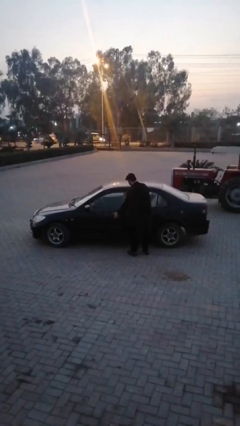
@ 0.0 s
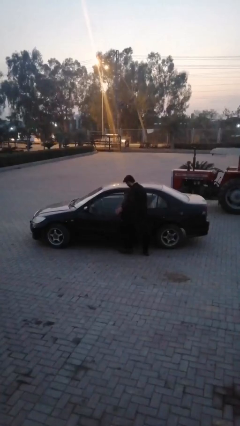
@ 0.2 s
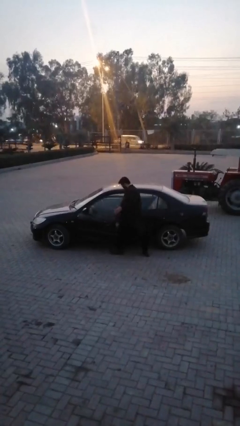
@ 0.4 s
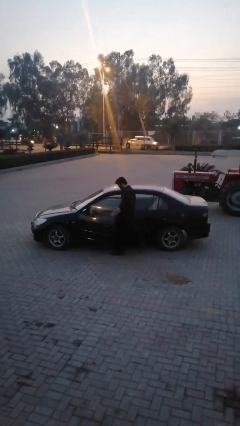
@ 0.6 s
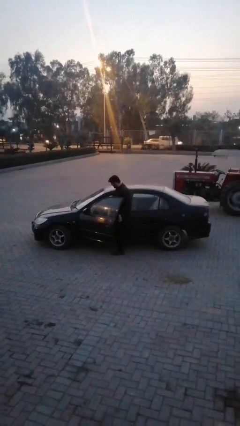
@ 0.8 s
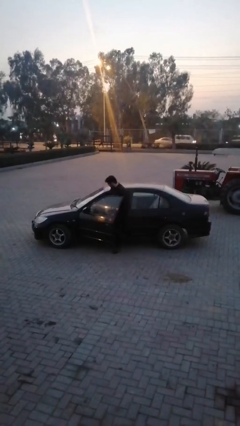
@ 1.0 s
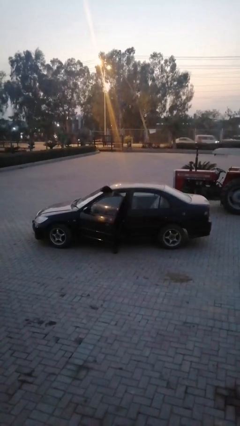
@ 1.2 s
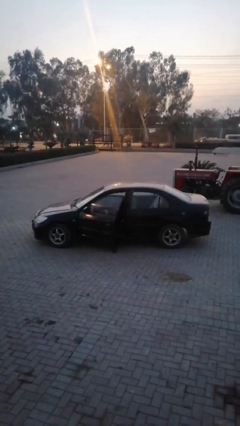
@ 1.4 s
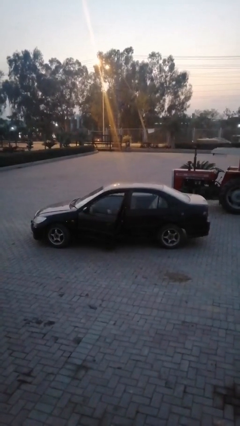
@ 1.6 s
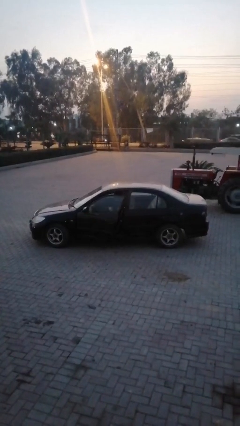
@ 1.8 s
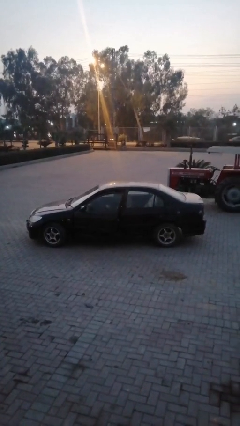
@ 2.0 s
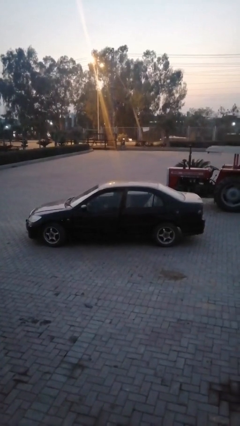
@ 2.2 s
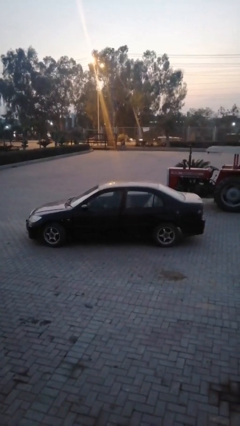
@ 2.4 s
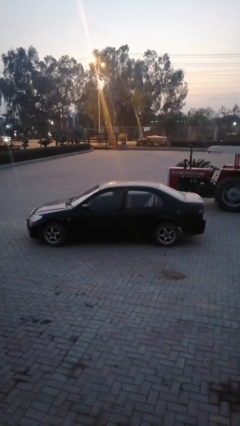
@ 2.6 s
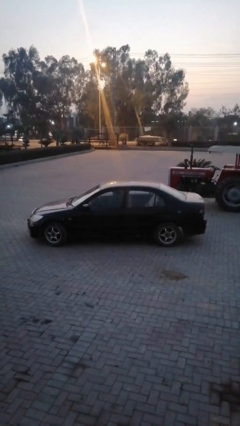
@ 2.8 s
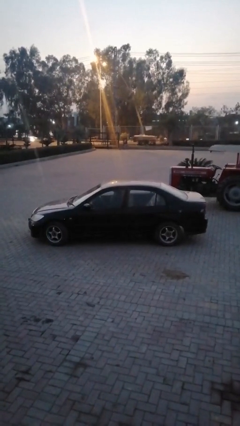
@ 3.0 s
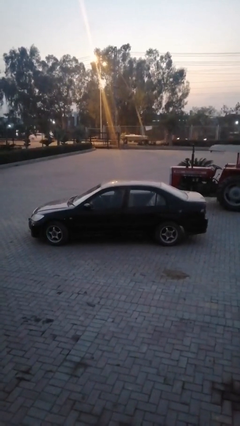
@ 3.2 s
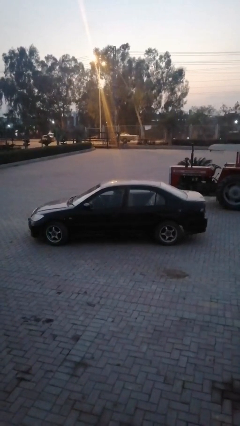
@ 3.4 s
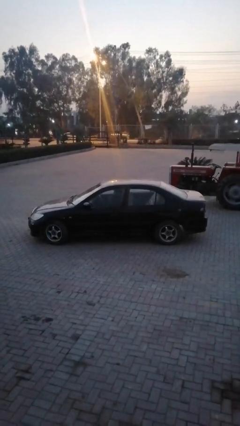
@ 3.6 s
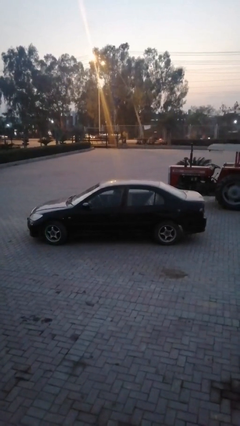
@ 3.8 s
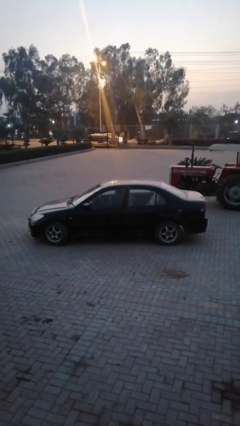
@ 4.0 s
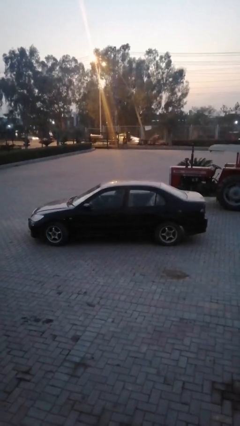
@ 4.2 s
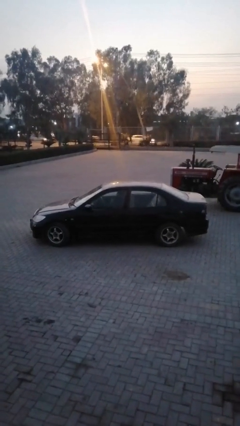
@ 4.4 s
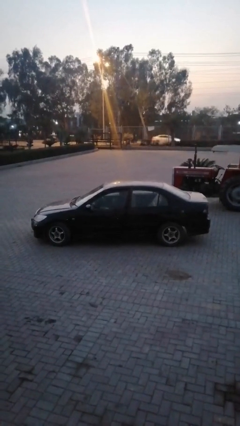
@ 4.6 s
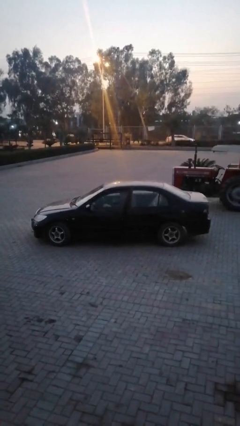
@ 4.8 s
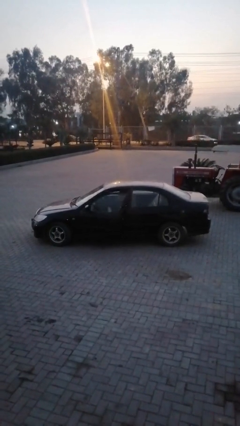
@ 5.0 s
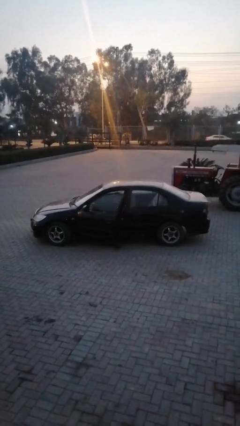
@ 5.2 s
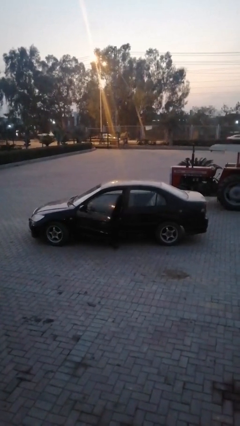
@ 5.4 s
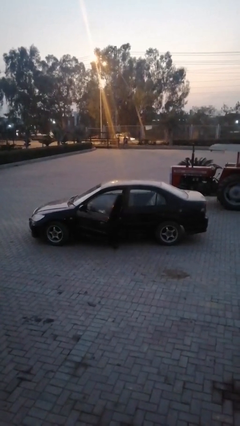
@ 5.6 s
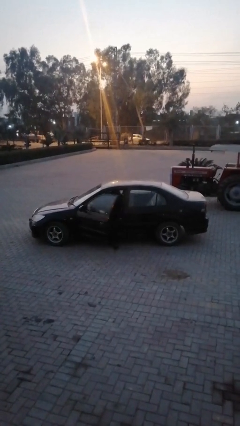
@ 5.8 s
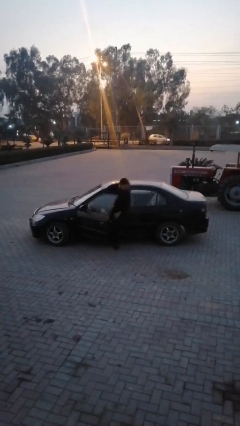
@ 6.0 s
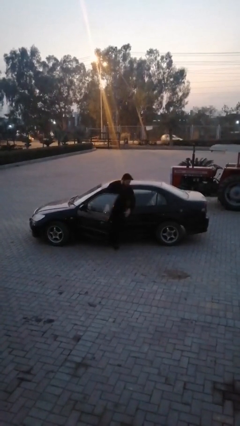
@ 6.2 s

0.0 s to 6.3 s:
car picks up person

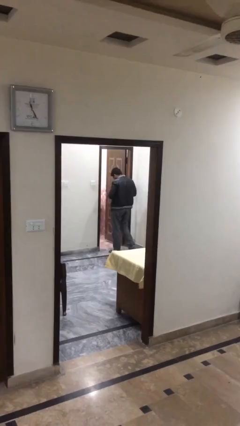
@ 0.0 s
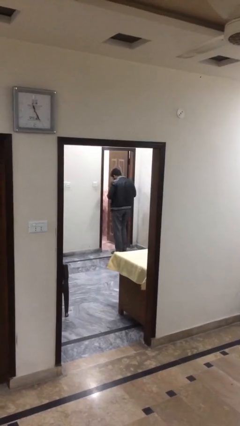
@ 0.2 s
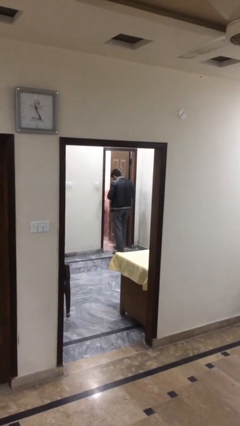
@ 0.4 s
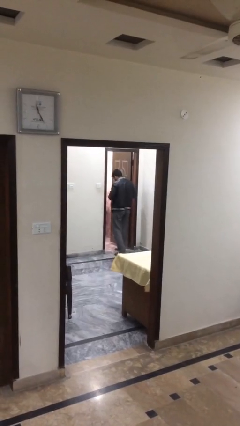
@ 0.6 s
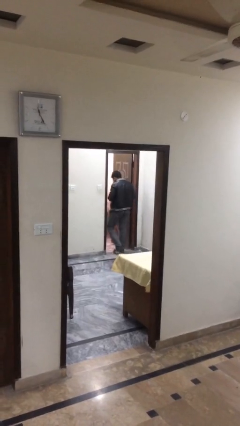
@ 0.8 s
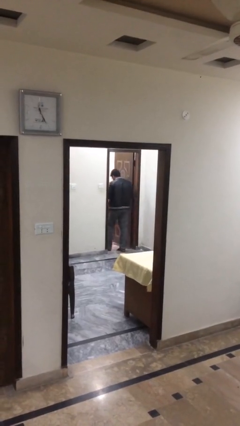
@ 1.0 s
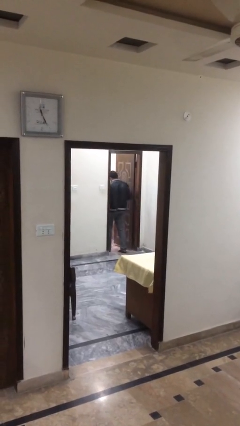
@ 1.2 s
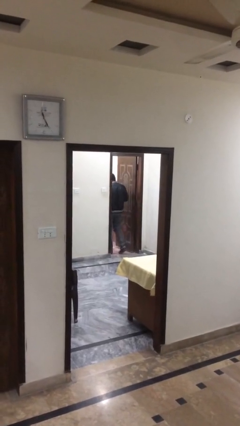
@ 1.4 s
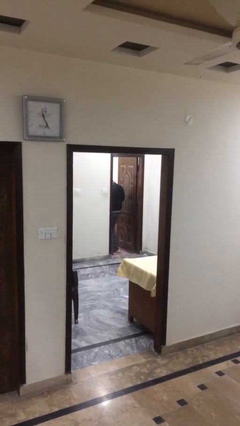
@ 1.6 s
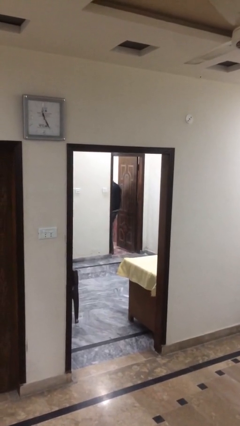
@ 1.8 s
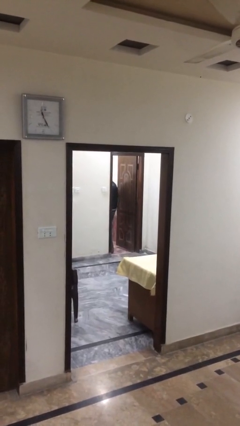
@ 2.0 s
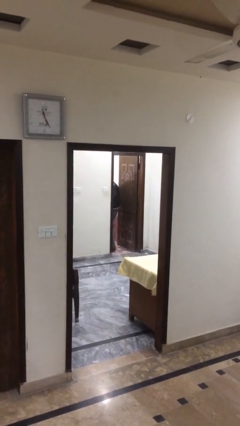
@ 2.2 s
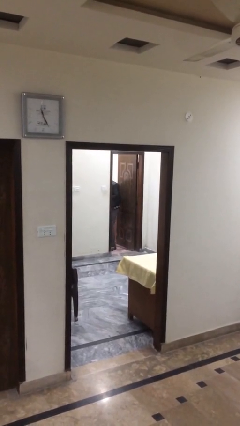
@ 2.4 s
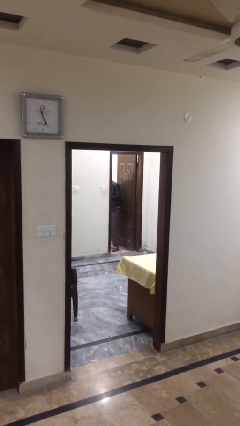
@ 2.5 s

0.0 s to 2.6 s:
person enters scene through structure

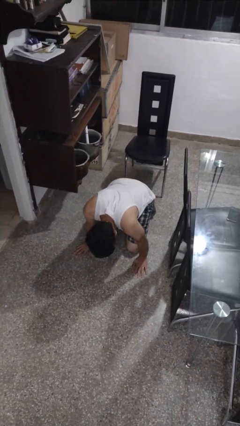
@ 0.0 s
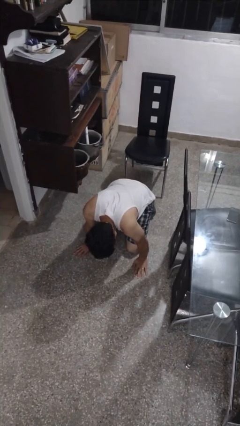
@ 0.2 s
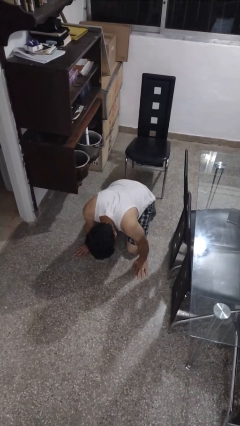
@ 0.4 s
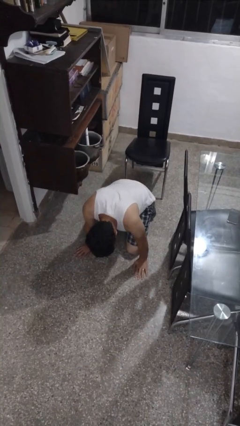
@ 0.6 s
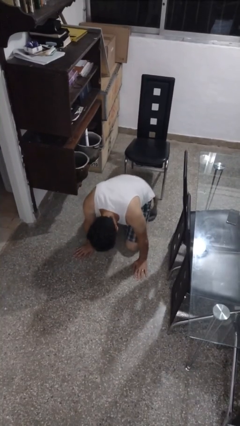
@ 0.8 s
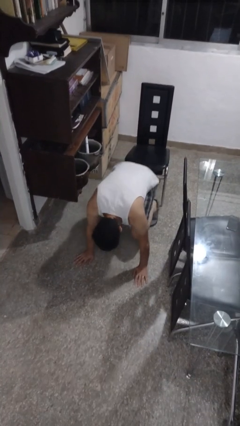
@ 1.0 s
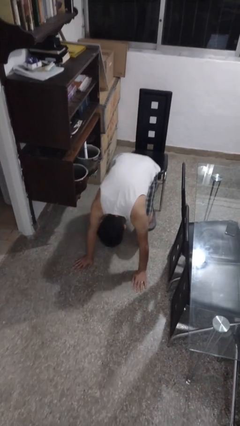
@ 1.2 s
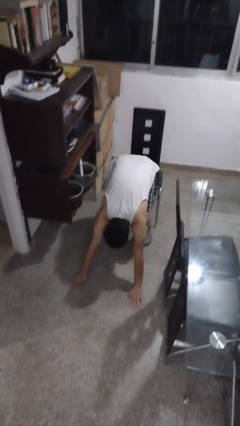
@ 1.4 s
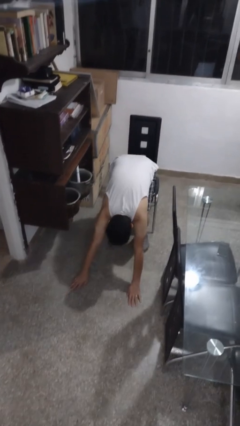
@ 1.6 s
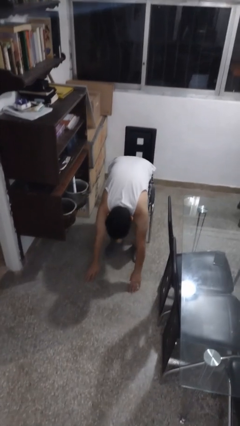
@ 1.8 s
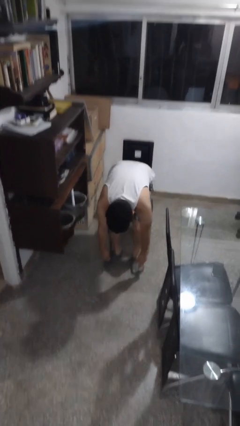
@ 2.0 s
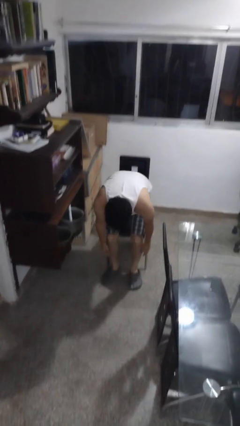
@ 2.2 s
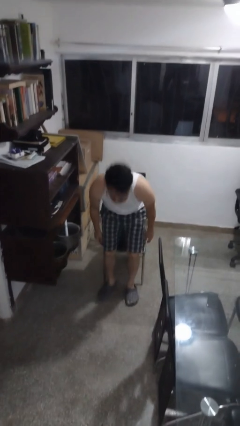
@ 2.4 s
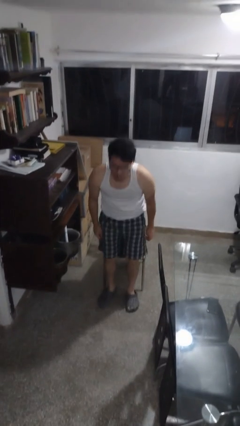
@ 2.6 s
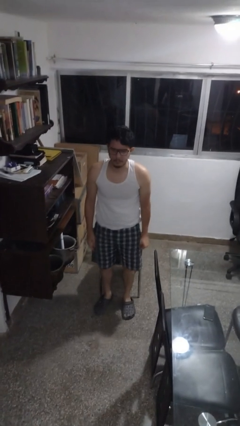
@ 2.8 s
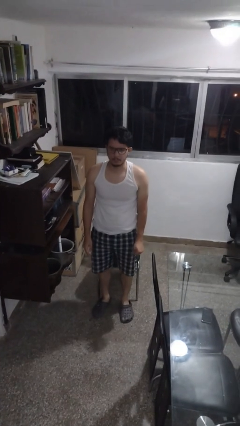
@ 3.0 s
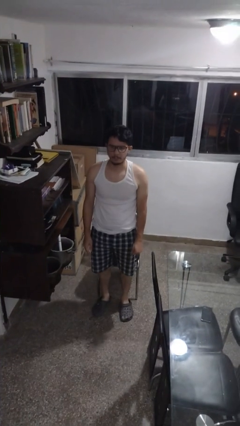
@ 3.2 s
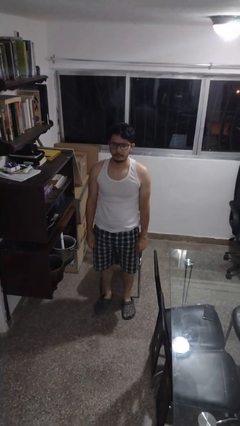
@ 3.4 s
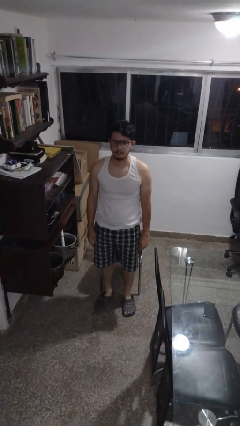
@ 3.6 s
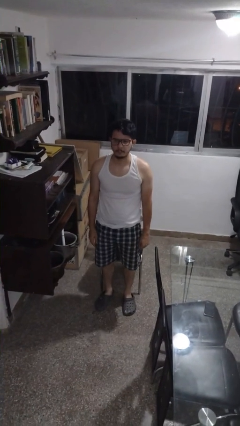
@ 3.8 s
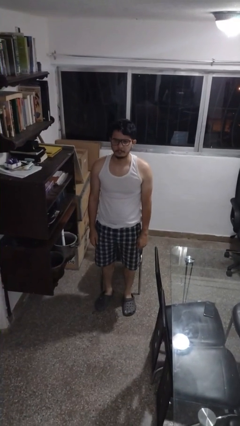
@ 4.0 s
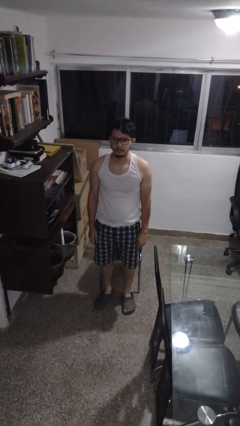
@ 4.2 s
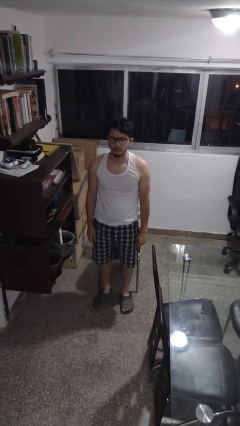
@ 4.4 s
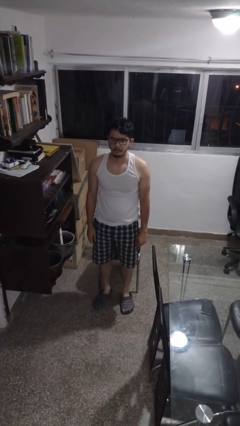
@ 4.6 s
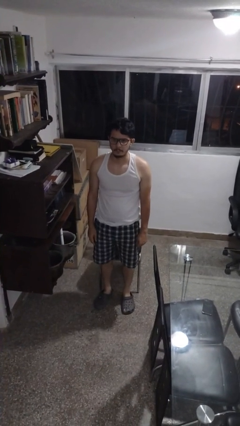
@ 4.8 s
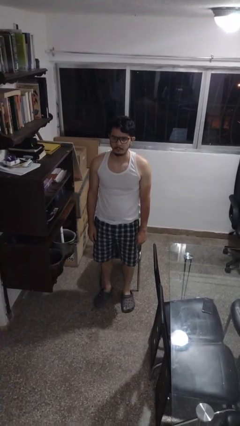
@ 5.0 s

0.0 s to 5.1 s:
person stands up from floor

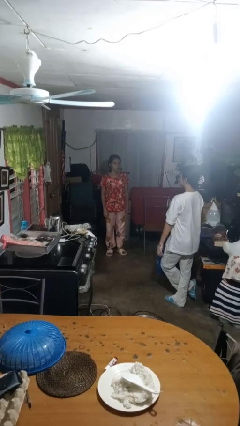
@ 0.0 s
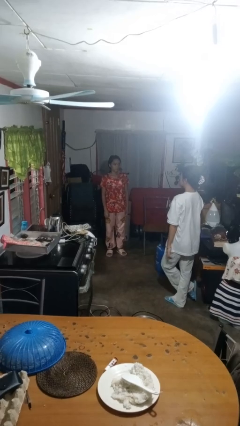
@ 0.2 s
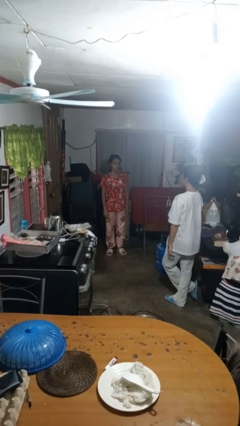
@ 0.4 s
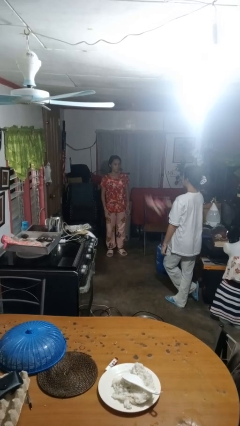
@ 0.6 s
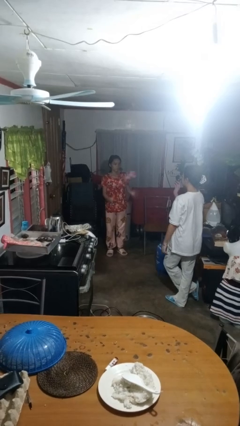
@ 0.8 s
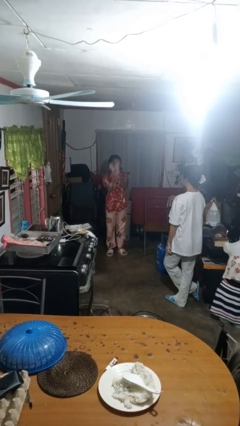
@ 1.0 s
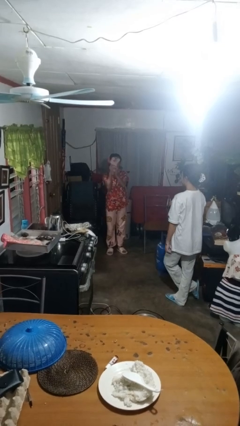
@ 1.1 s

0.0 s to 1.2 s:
person catches object from person

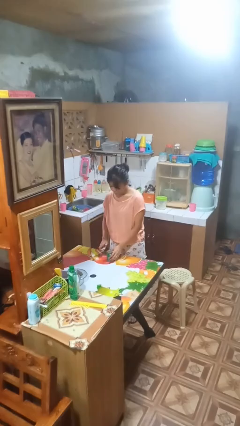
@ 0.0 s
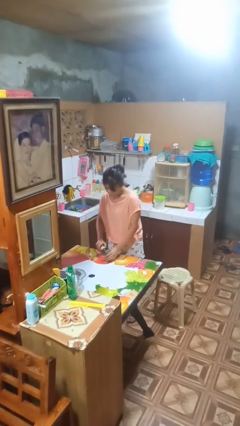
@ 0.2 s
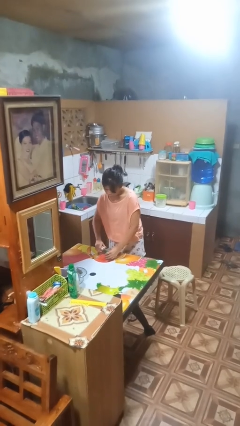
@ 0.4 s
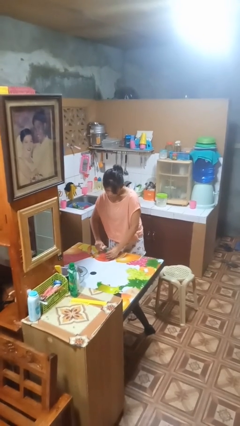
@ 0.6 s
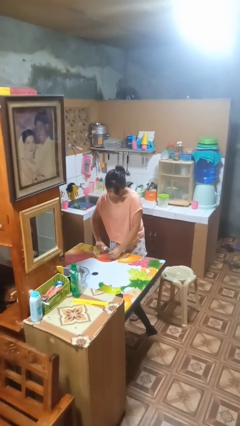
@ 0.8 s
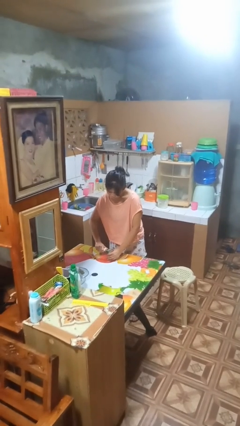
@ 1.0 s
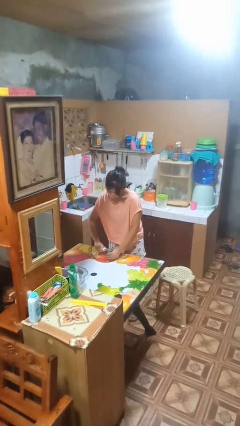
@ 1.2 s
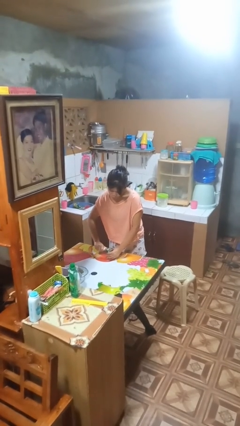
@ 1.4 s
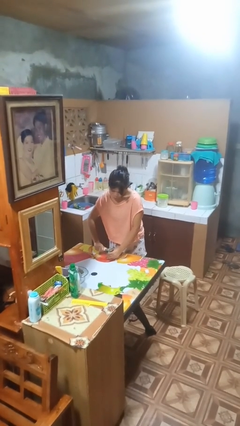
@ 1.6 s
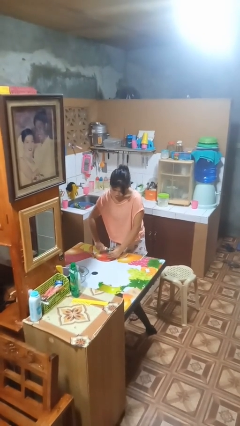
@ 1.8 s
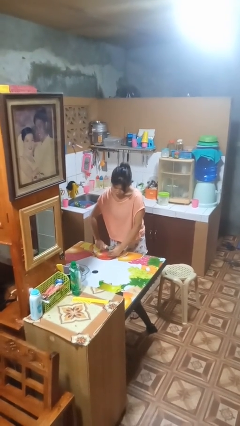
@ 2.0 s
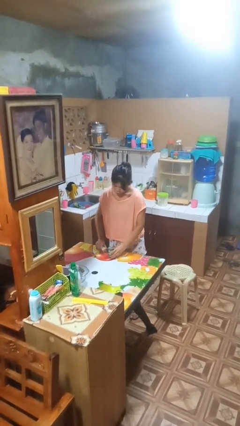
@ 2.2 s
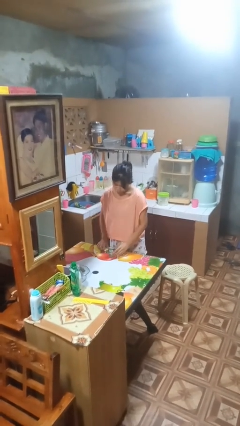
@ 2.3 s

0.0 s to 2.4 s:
person opens can with can opener
